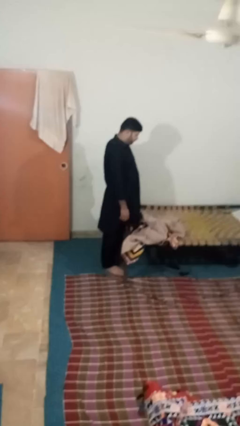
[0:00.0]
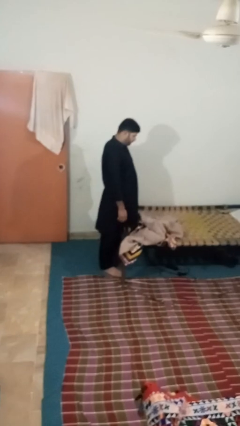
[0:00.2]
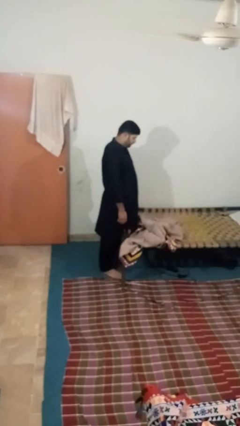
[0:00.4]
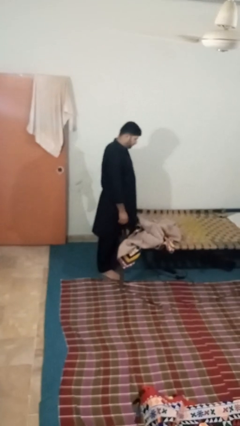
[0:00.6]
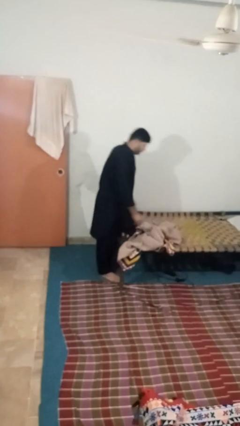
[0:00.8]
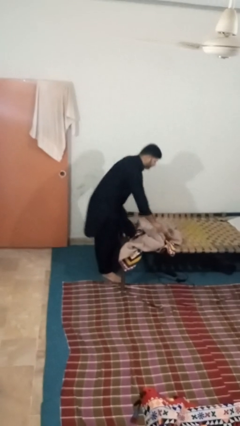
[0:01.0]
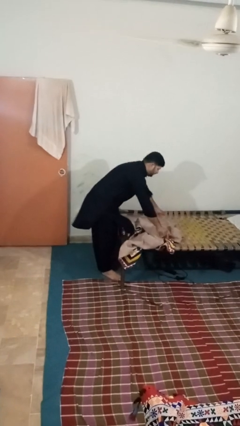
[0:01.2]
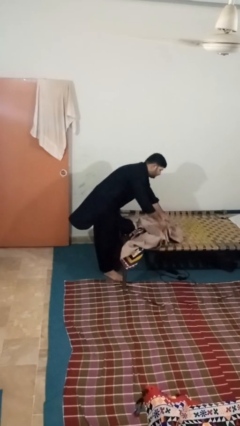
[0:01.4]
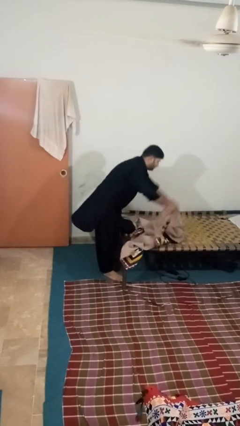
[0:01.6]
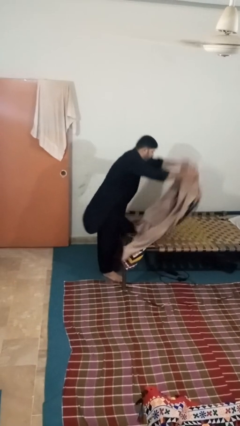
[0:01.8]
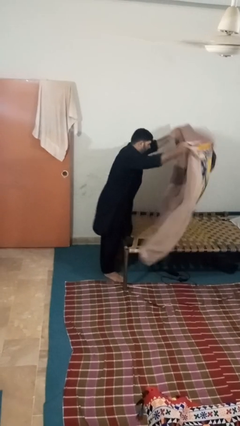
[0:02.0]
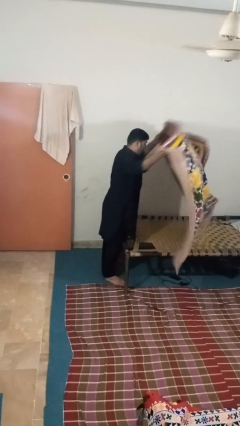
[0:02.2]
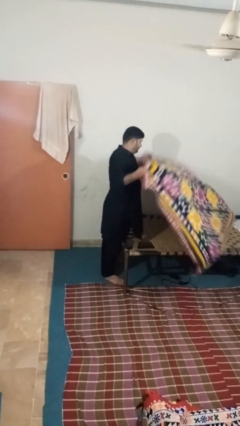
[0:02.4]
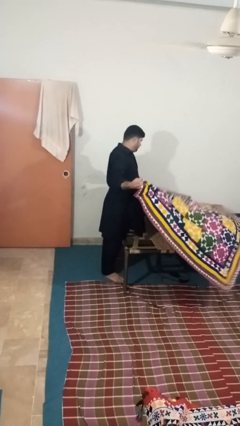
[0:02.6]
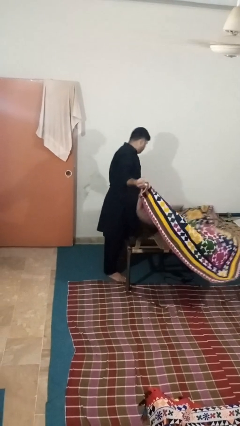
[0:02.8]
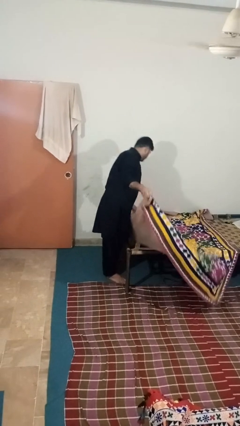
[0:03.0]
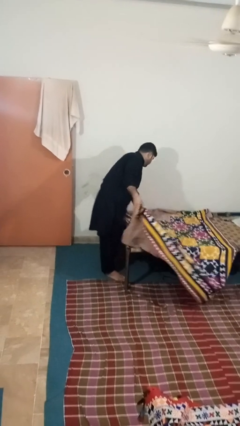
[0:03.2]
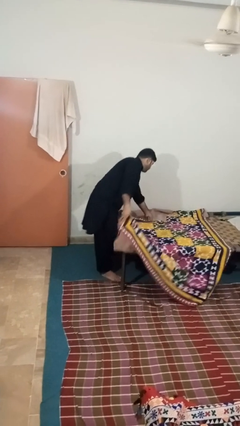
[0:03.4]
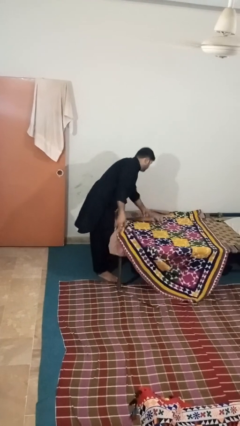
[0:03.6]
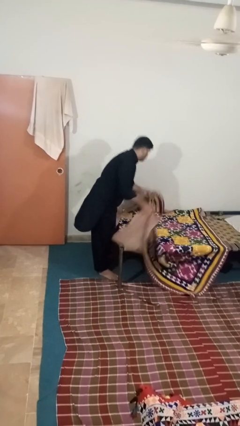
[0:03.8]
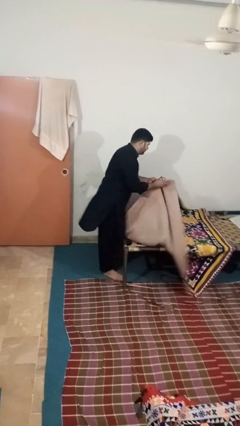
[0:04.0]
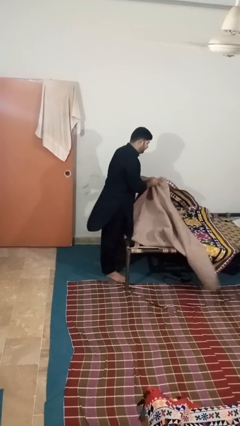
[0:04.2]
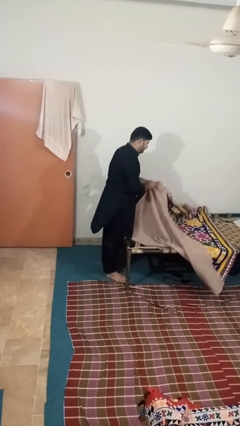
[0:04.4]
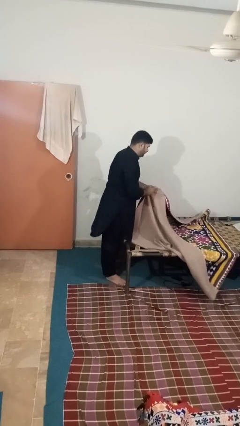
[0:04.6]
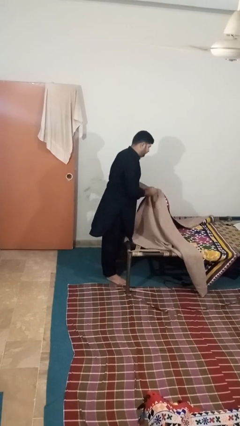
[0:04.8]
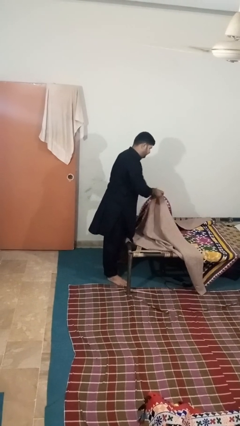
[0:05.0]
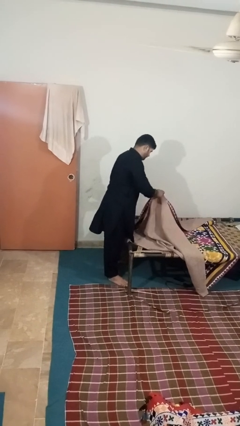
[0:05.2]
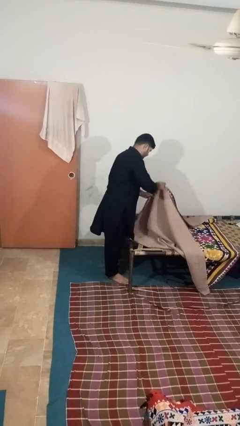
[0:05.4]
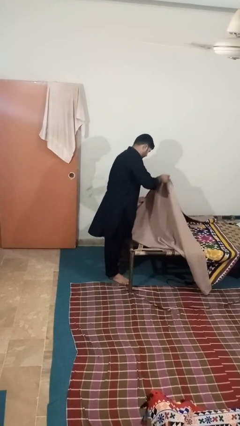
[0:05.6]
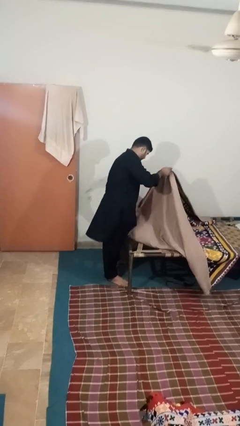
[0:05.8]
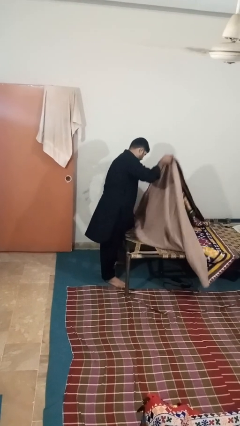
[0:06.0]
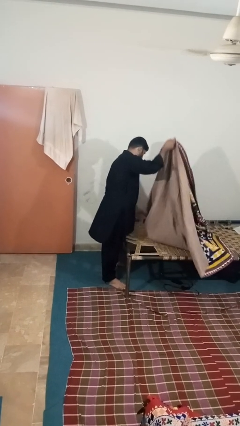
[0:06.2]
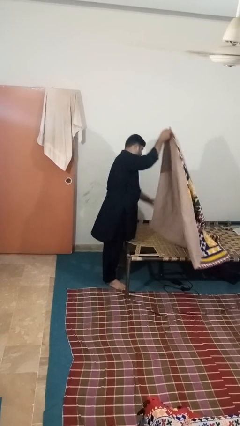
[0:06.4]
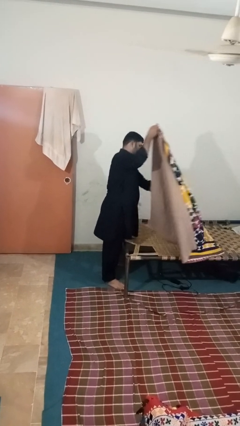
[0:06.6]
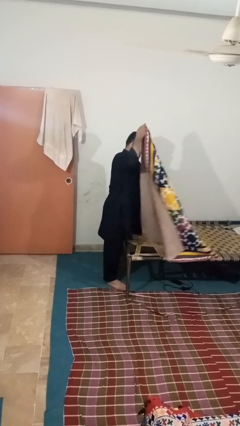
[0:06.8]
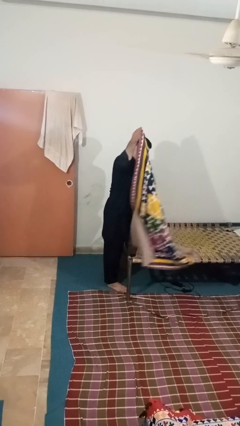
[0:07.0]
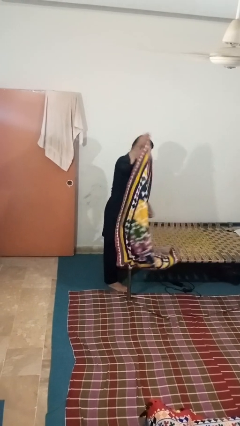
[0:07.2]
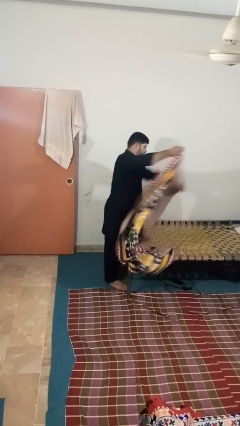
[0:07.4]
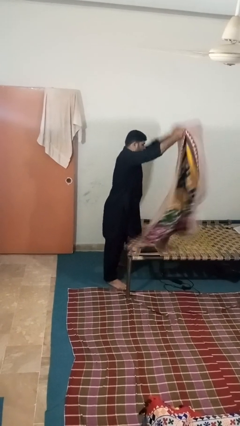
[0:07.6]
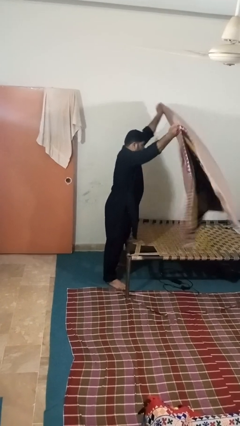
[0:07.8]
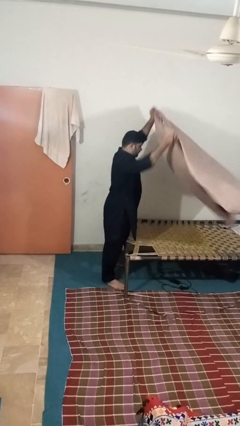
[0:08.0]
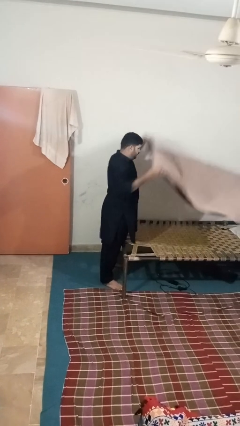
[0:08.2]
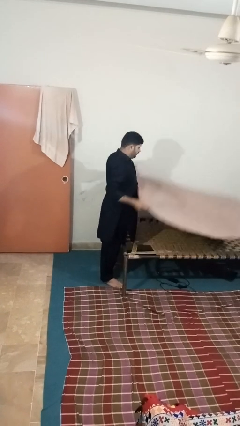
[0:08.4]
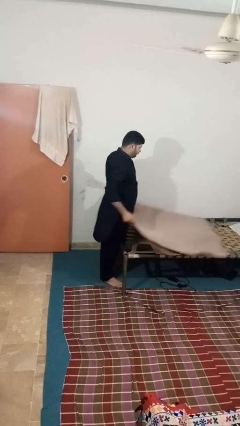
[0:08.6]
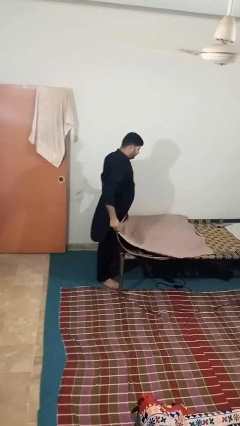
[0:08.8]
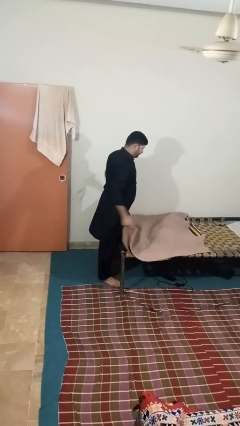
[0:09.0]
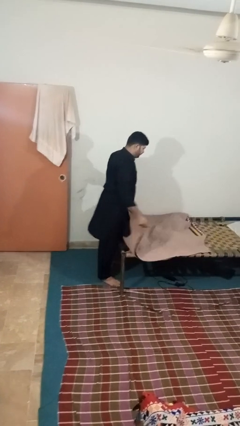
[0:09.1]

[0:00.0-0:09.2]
person folds blanket

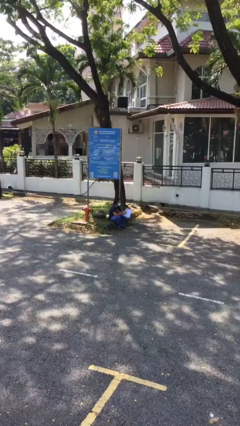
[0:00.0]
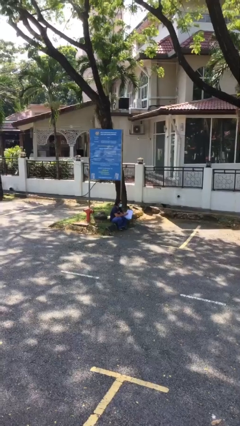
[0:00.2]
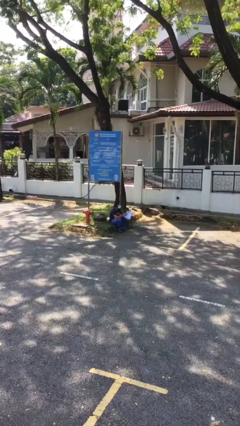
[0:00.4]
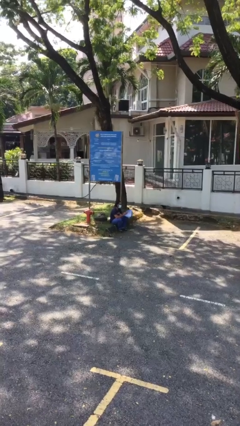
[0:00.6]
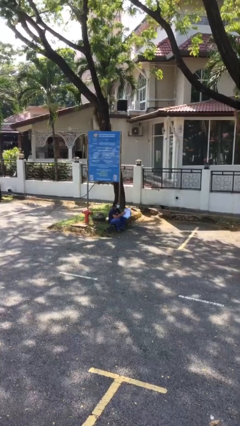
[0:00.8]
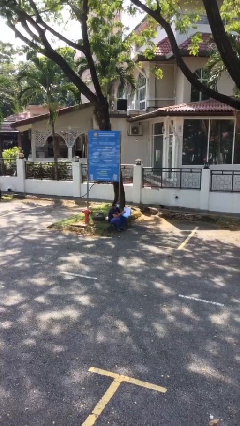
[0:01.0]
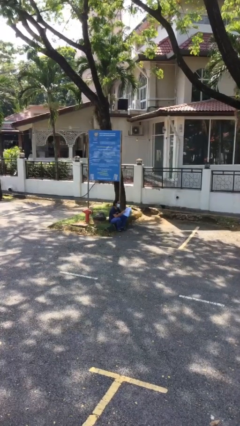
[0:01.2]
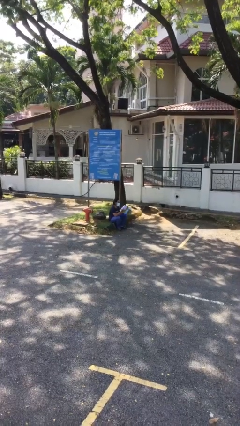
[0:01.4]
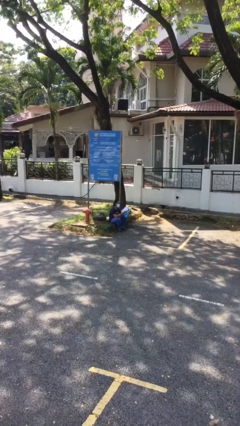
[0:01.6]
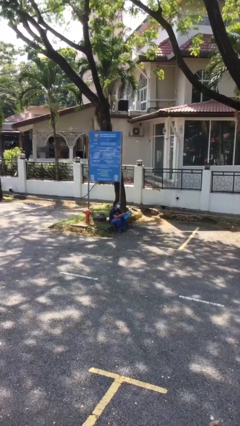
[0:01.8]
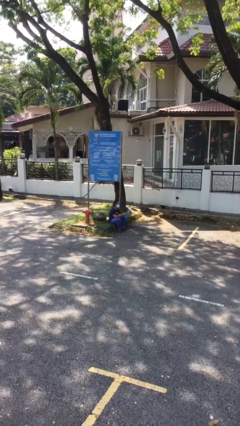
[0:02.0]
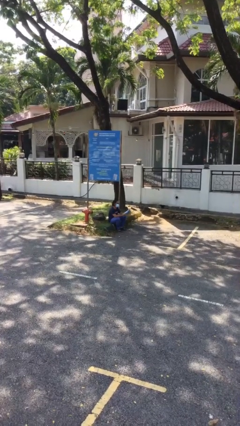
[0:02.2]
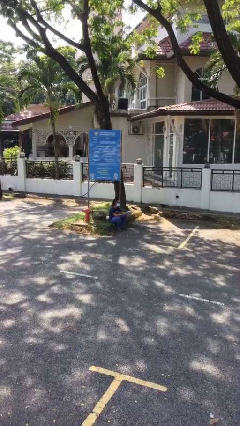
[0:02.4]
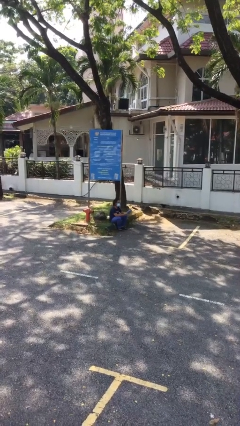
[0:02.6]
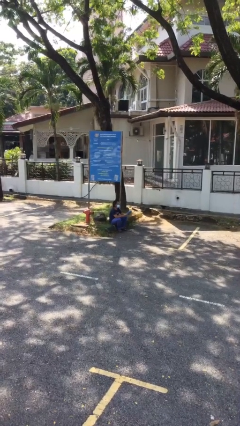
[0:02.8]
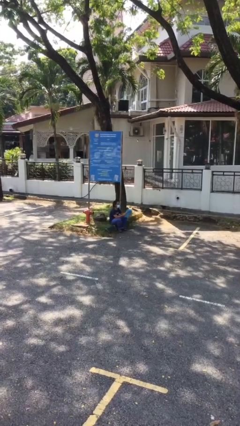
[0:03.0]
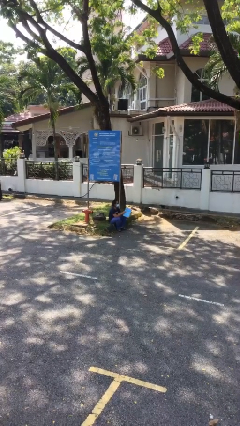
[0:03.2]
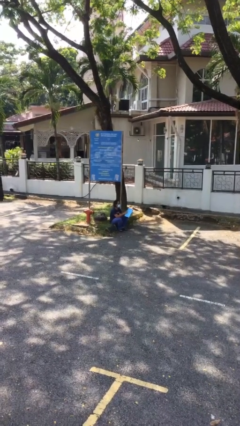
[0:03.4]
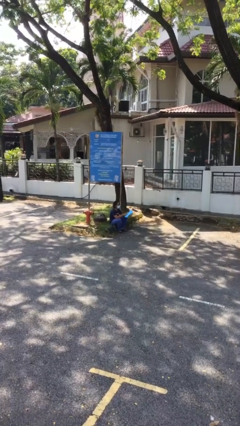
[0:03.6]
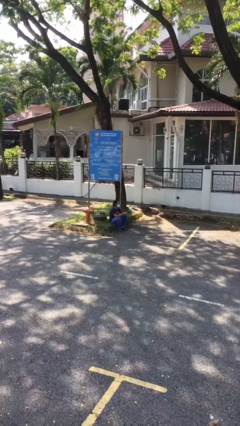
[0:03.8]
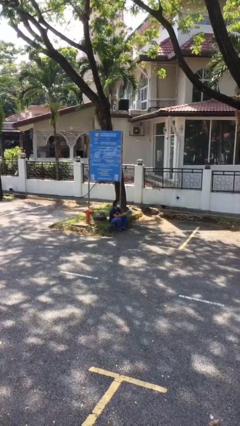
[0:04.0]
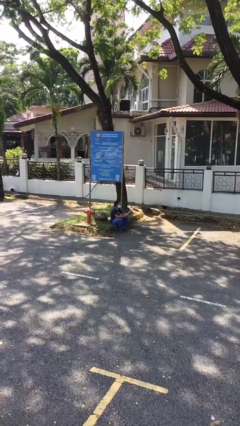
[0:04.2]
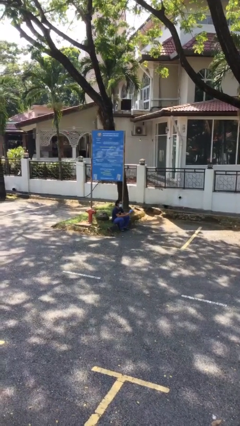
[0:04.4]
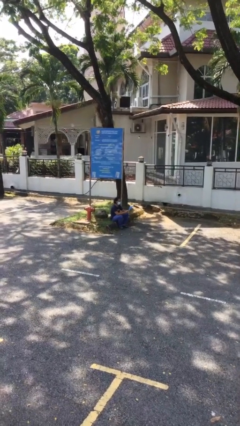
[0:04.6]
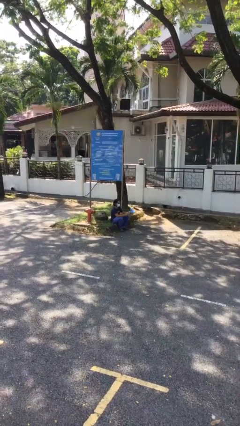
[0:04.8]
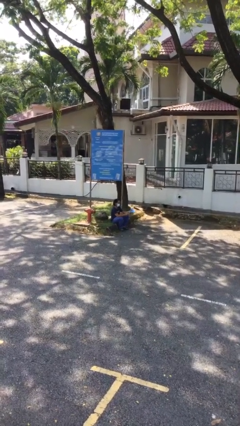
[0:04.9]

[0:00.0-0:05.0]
person reads document

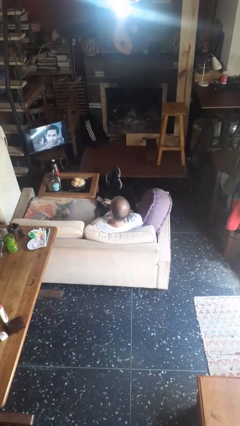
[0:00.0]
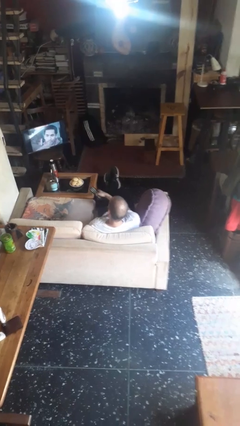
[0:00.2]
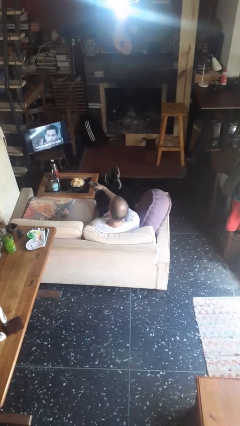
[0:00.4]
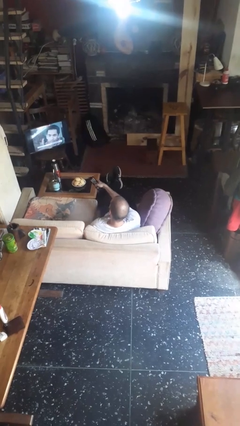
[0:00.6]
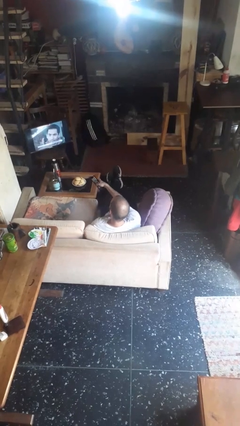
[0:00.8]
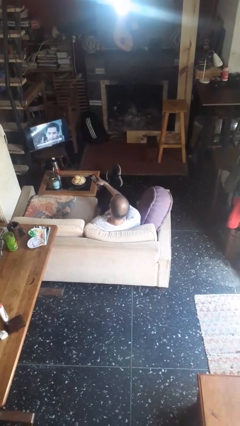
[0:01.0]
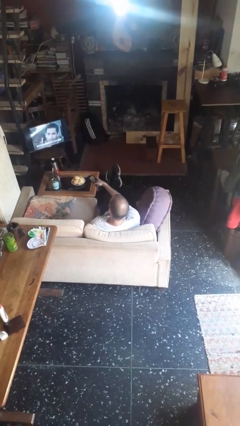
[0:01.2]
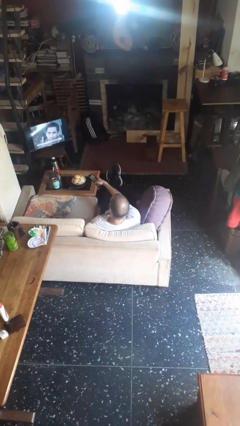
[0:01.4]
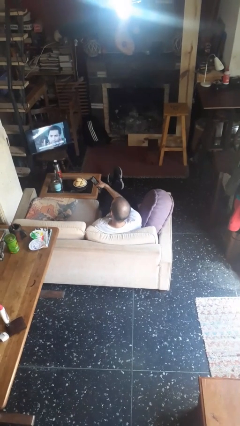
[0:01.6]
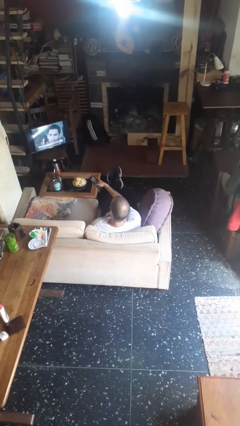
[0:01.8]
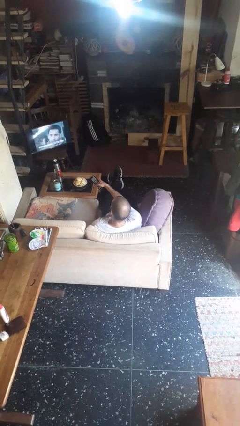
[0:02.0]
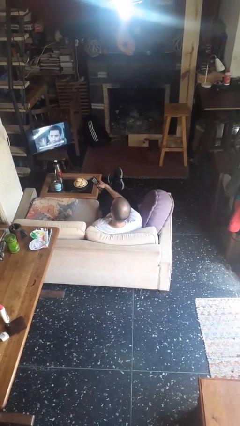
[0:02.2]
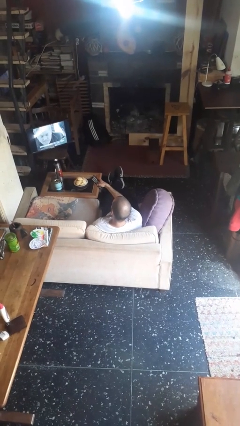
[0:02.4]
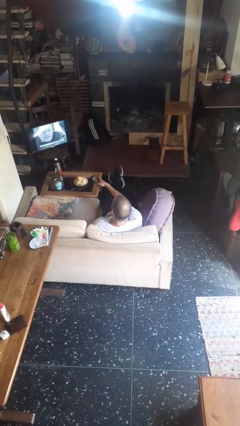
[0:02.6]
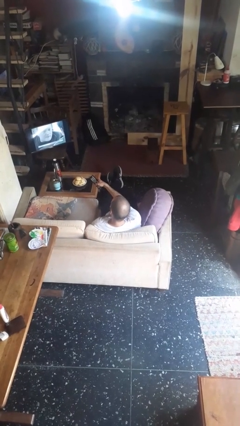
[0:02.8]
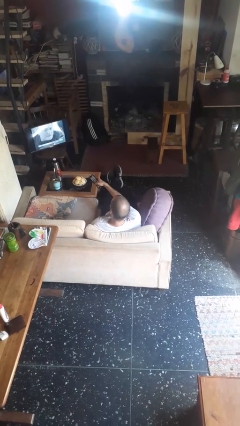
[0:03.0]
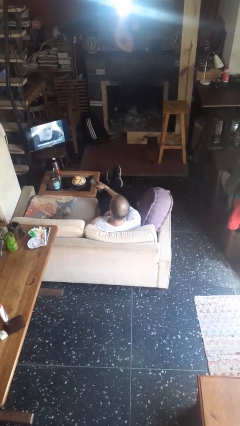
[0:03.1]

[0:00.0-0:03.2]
person uses television remote

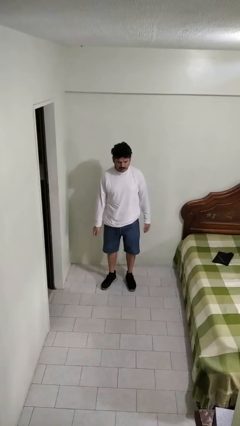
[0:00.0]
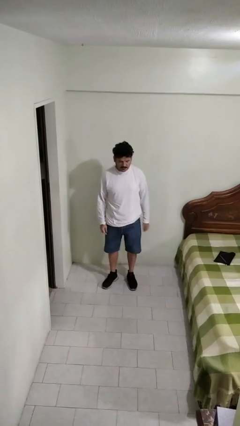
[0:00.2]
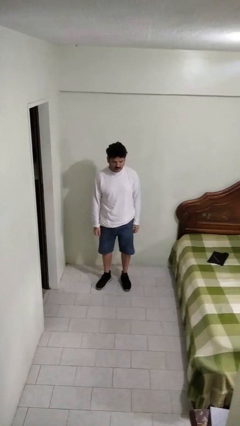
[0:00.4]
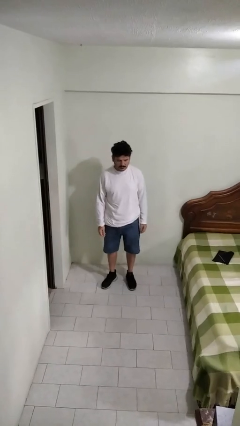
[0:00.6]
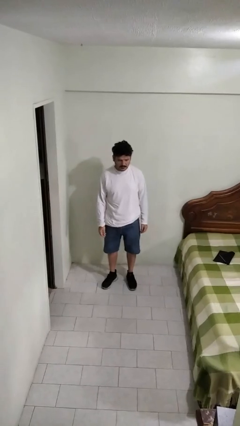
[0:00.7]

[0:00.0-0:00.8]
person untucks shirt
